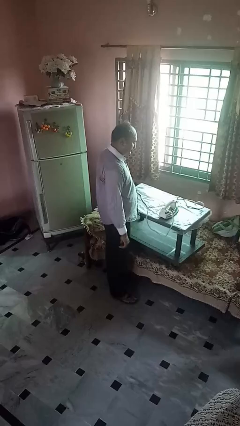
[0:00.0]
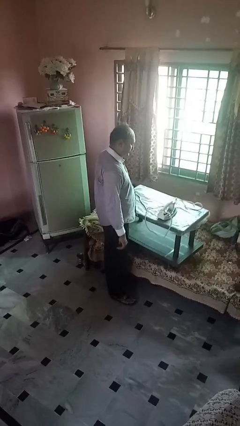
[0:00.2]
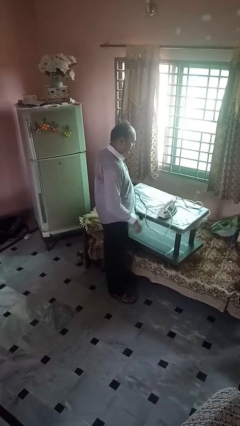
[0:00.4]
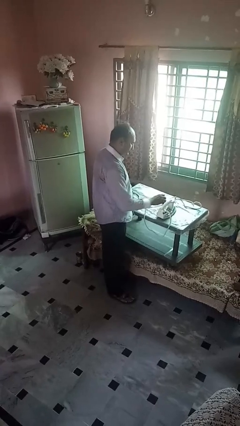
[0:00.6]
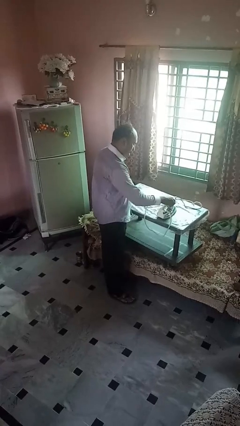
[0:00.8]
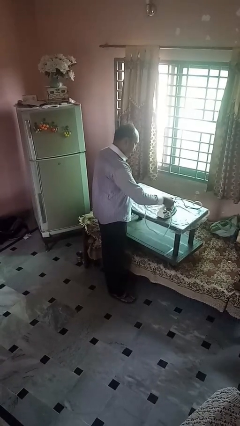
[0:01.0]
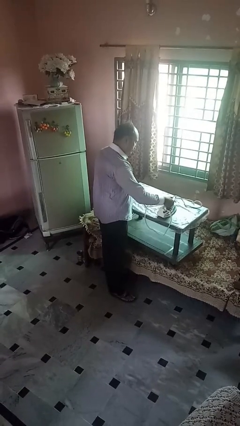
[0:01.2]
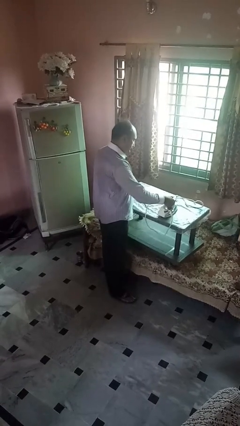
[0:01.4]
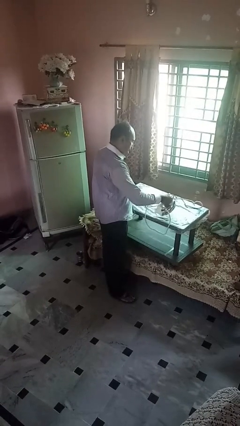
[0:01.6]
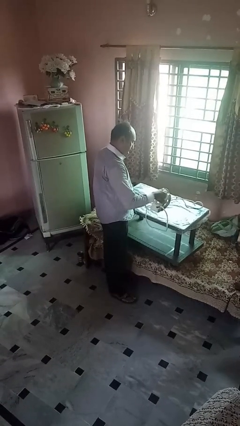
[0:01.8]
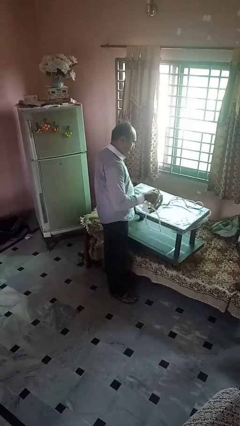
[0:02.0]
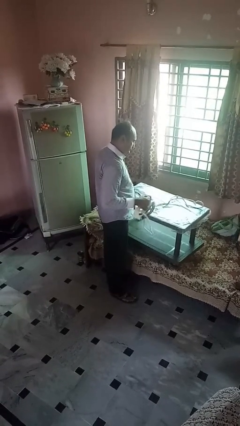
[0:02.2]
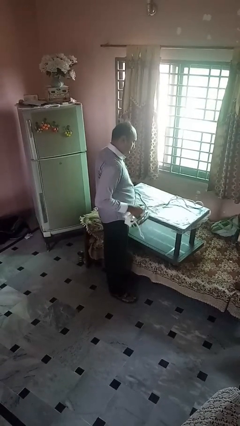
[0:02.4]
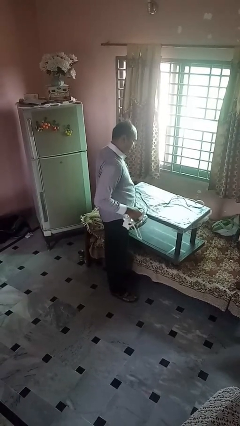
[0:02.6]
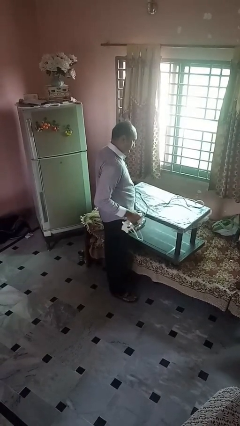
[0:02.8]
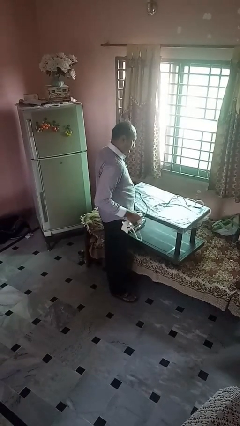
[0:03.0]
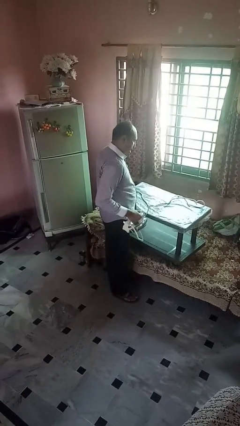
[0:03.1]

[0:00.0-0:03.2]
person picks up object from countertop

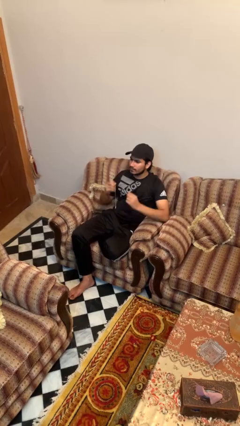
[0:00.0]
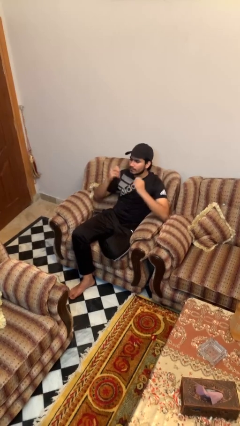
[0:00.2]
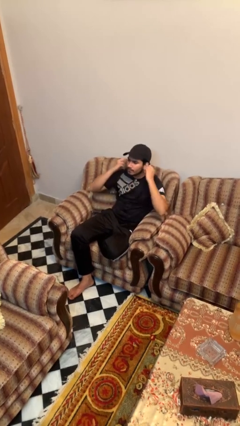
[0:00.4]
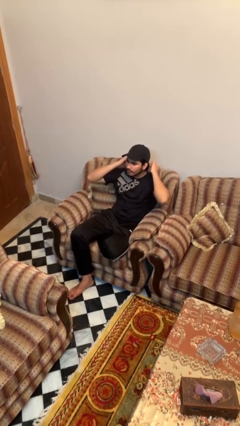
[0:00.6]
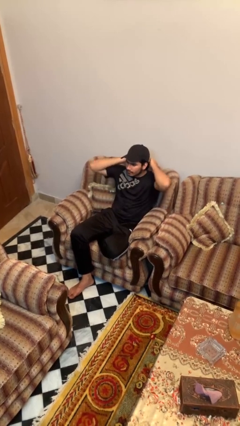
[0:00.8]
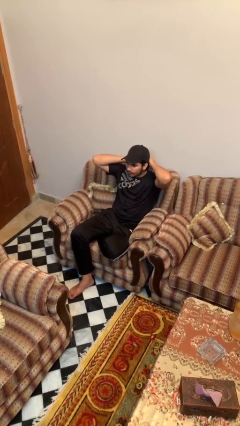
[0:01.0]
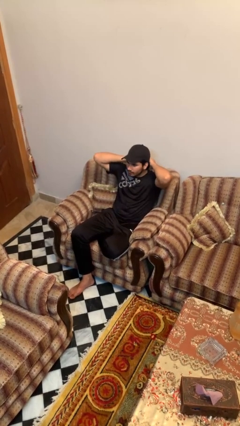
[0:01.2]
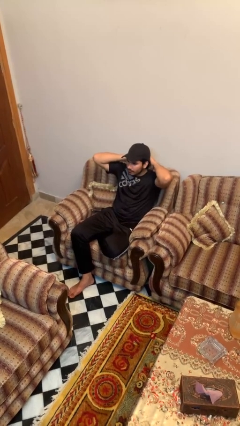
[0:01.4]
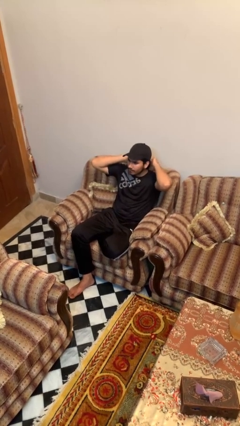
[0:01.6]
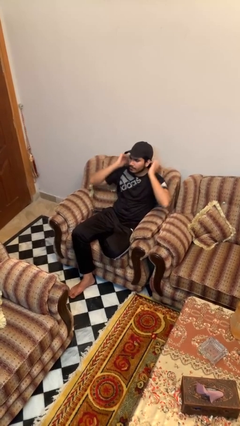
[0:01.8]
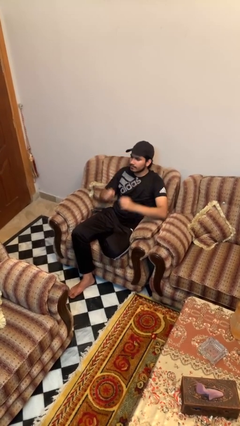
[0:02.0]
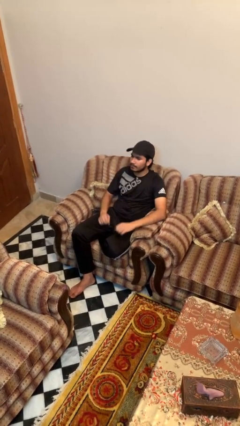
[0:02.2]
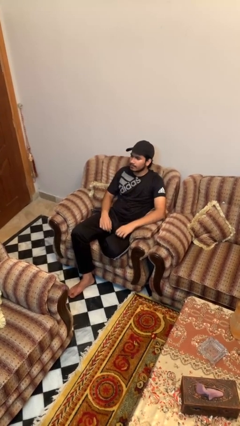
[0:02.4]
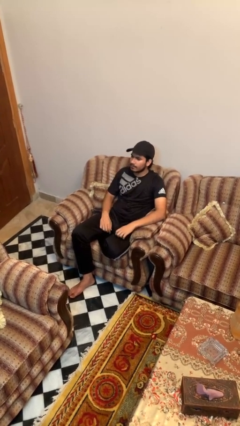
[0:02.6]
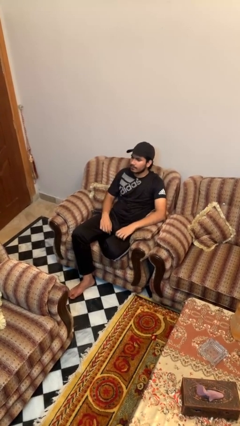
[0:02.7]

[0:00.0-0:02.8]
person puts on necklace

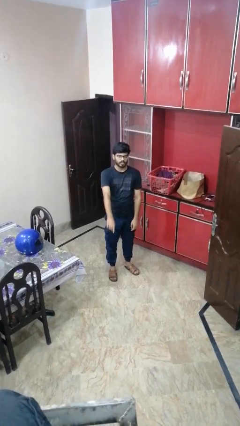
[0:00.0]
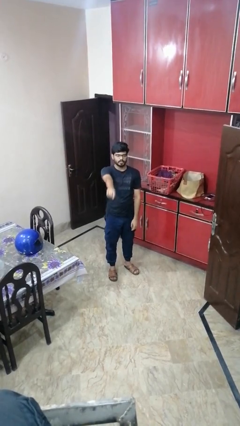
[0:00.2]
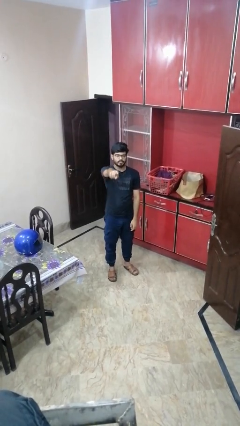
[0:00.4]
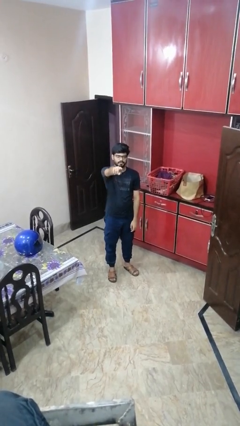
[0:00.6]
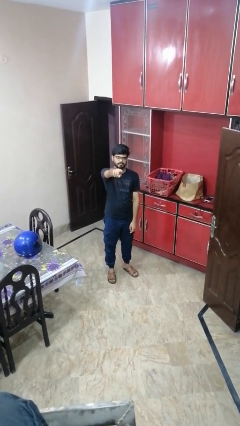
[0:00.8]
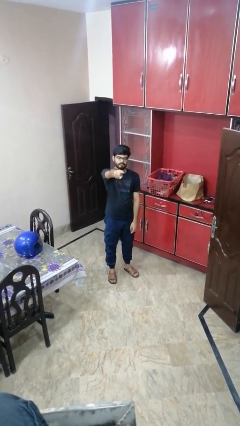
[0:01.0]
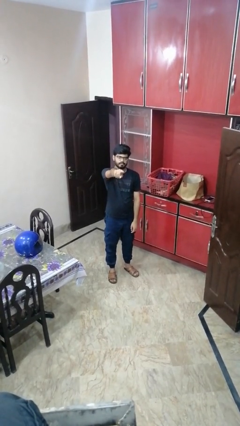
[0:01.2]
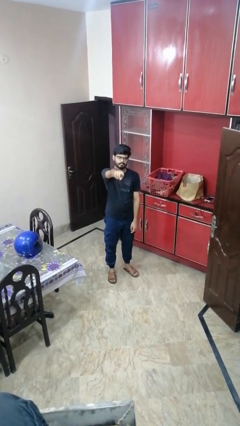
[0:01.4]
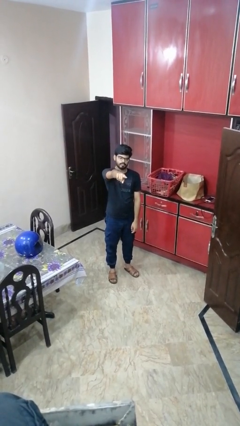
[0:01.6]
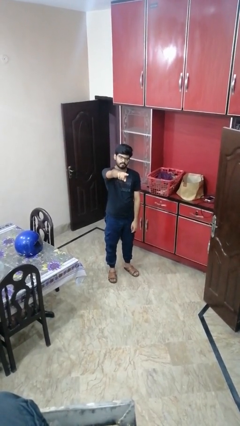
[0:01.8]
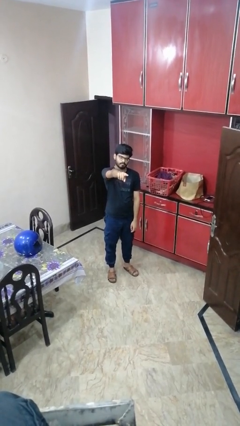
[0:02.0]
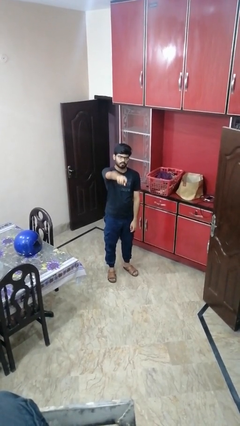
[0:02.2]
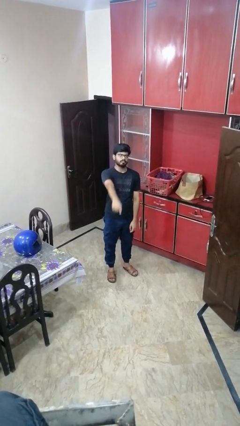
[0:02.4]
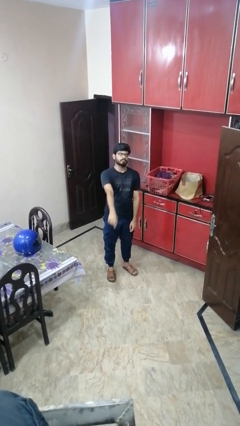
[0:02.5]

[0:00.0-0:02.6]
person points at person

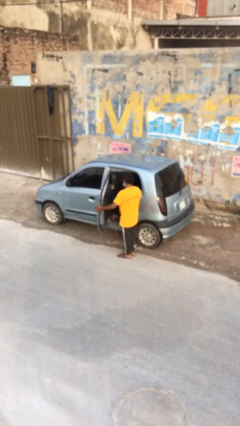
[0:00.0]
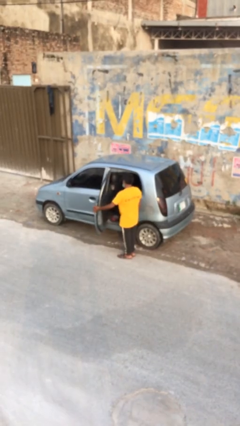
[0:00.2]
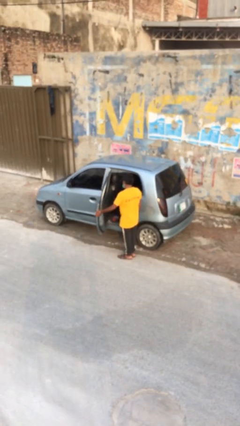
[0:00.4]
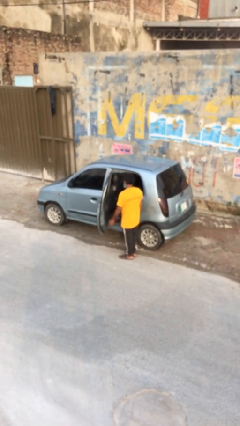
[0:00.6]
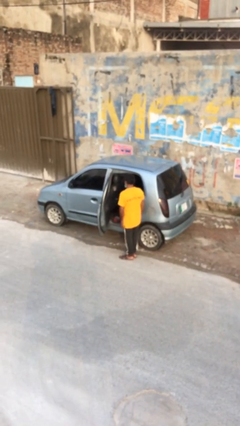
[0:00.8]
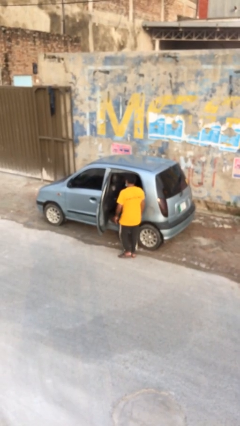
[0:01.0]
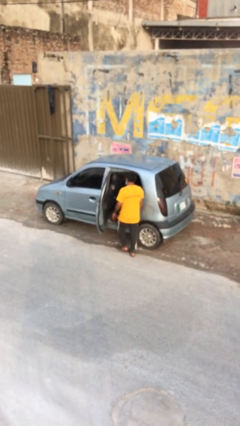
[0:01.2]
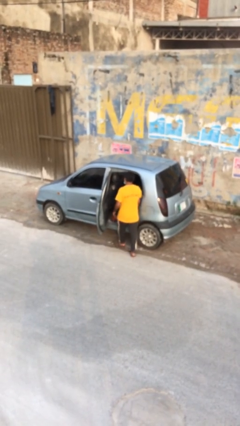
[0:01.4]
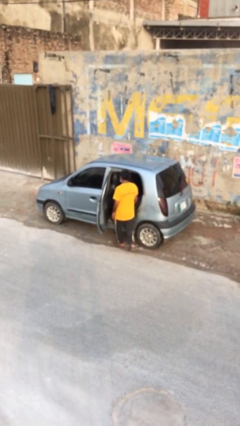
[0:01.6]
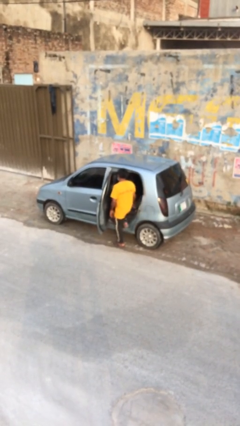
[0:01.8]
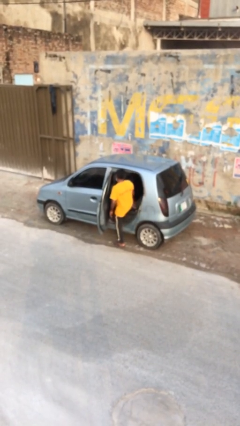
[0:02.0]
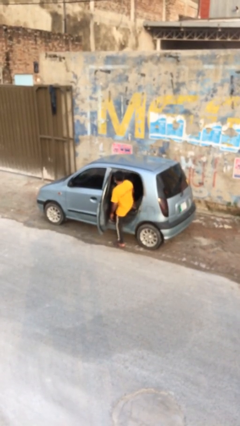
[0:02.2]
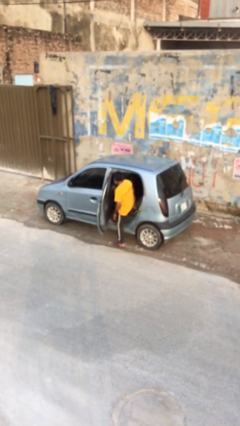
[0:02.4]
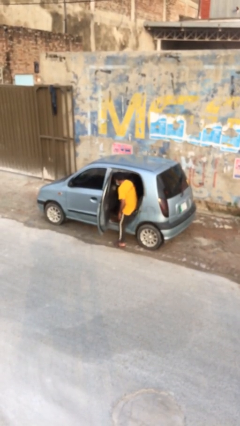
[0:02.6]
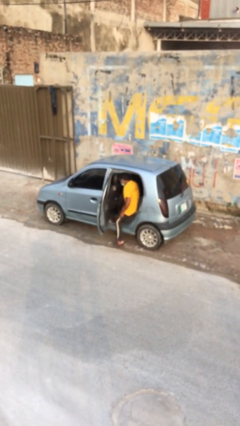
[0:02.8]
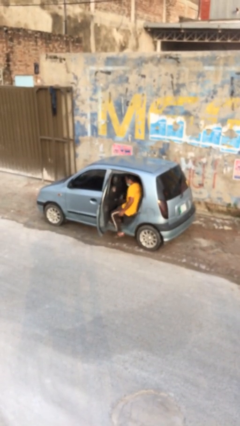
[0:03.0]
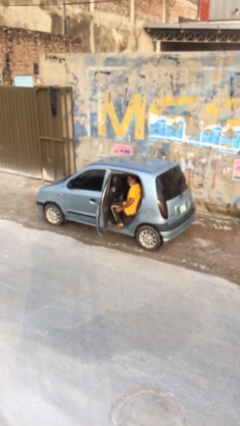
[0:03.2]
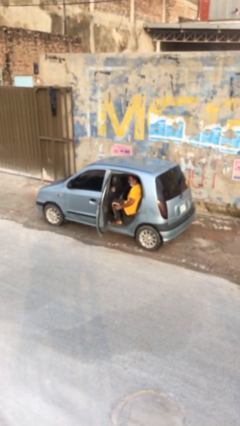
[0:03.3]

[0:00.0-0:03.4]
person enters car

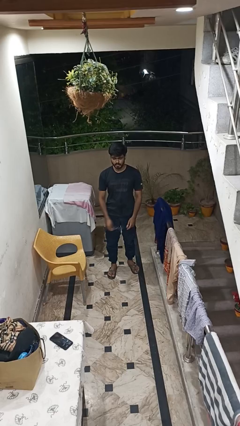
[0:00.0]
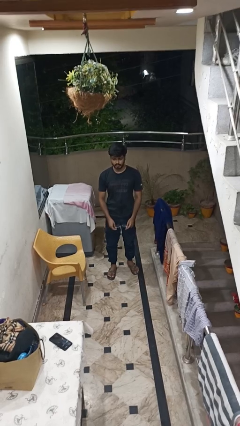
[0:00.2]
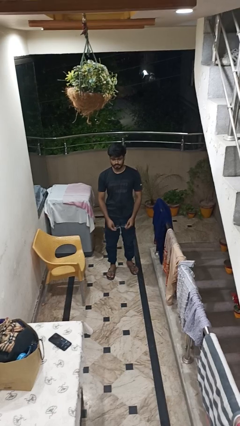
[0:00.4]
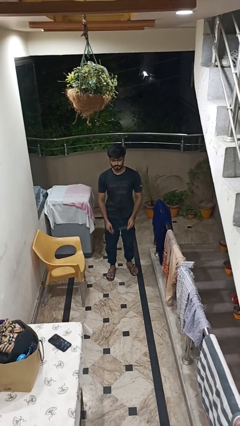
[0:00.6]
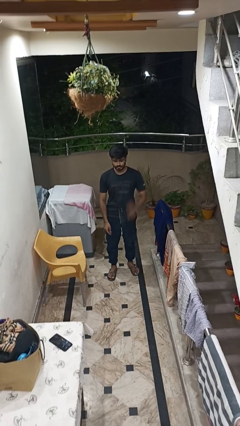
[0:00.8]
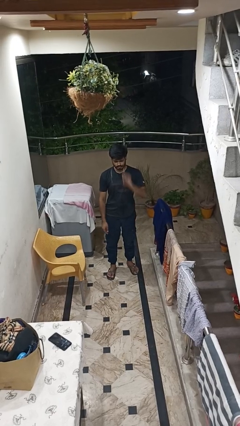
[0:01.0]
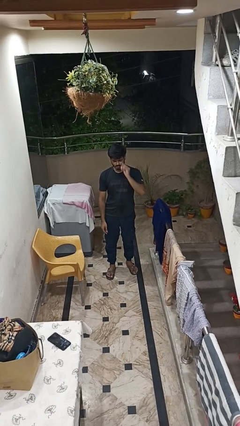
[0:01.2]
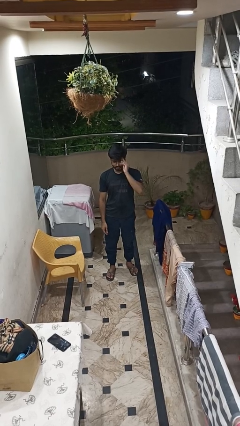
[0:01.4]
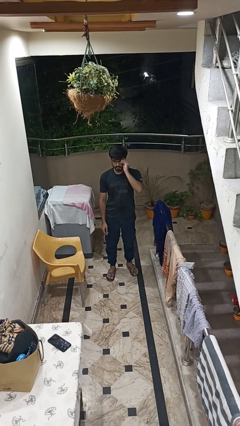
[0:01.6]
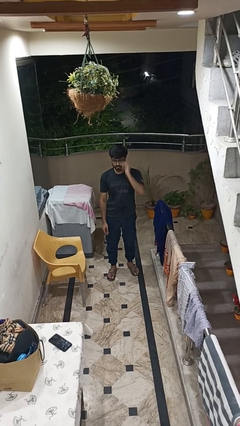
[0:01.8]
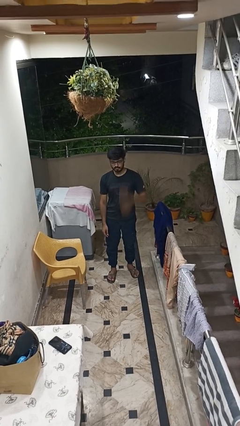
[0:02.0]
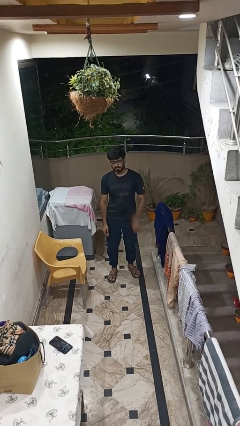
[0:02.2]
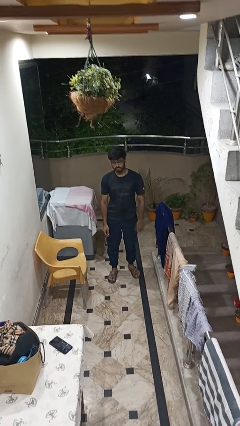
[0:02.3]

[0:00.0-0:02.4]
person puts on glasses

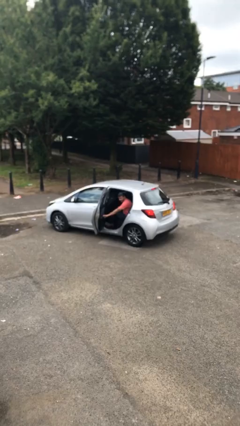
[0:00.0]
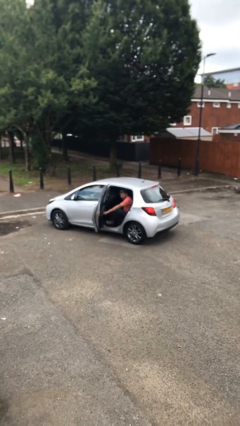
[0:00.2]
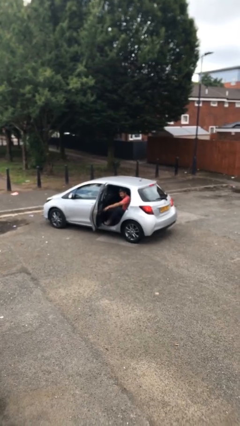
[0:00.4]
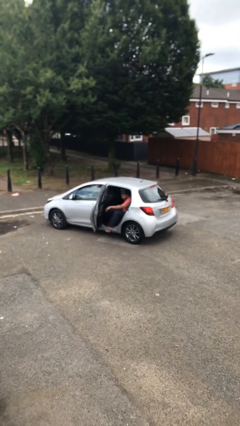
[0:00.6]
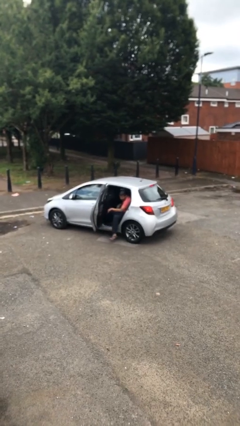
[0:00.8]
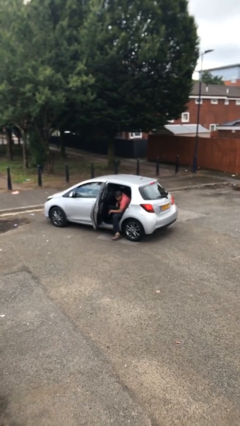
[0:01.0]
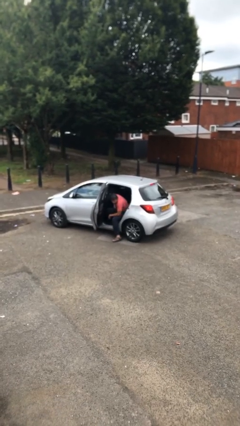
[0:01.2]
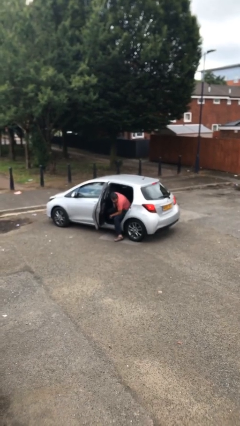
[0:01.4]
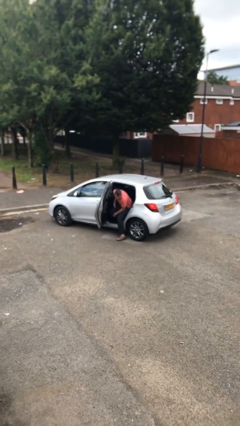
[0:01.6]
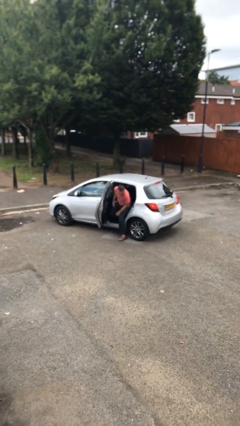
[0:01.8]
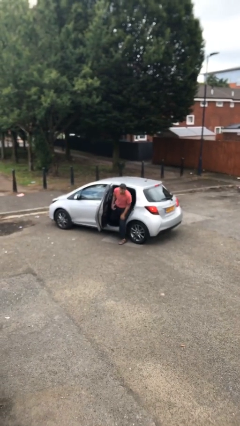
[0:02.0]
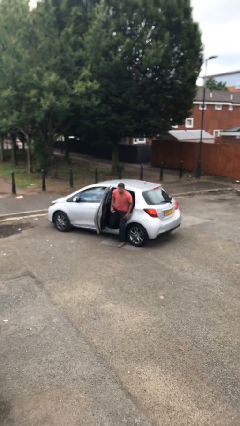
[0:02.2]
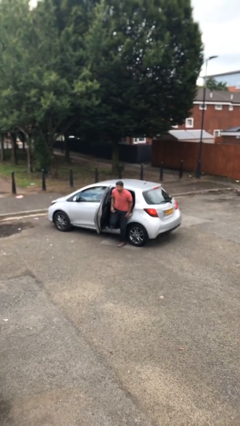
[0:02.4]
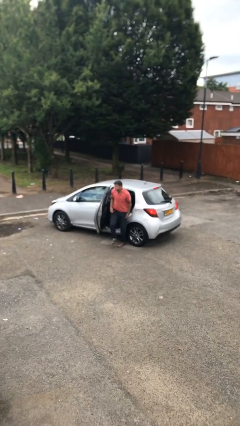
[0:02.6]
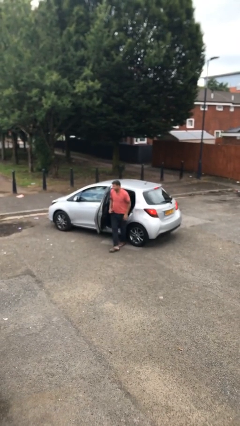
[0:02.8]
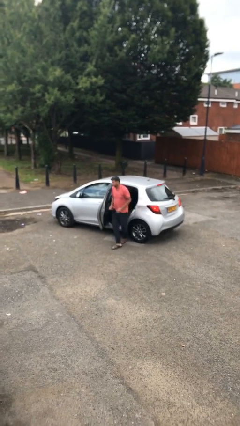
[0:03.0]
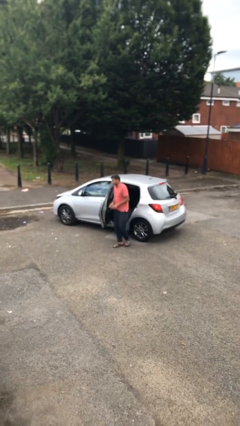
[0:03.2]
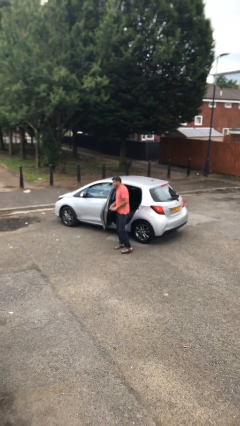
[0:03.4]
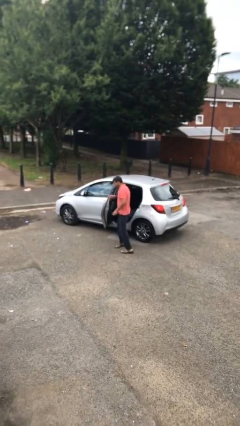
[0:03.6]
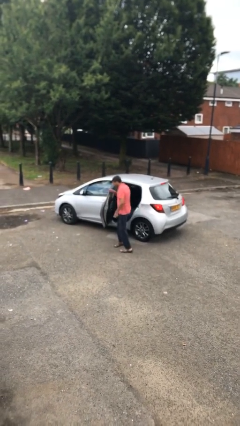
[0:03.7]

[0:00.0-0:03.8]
person exits car
